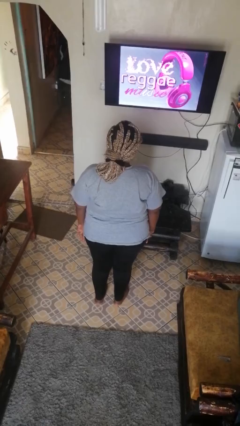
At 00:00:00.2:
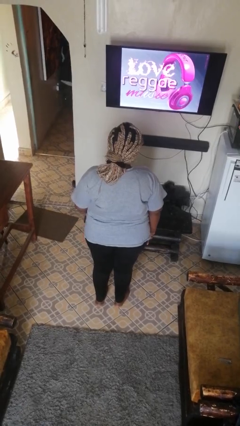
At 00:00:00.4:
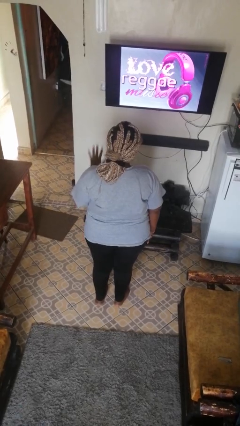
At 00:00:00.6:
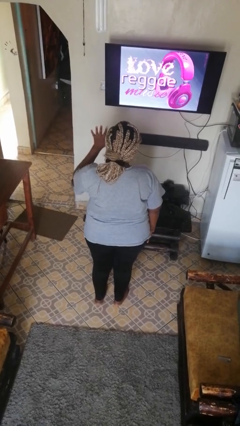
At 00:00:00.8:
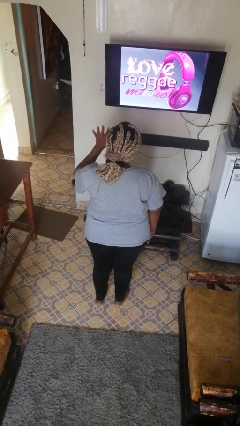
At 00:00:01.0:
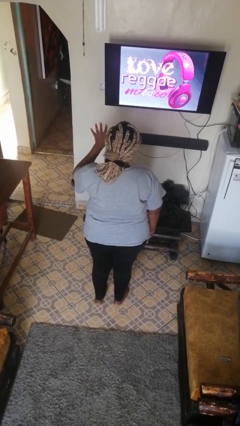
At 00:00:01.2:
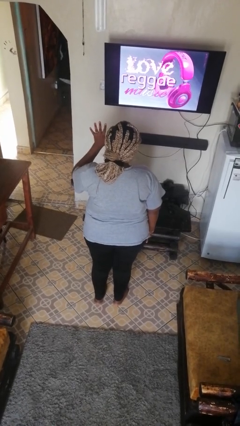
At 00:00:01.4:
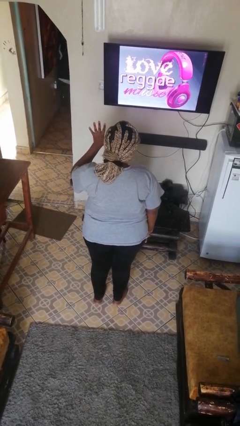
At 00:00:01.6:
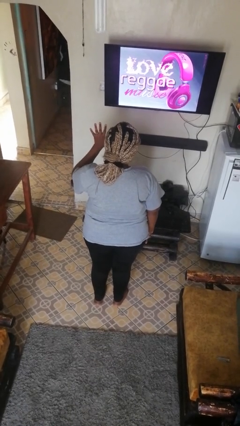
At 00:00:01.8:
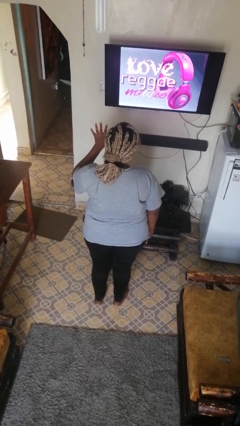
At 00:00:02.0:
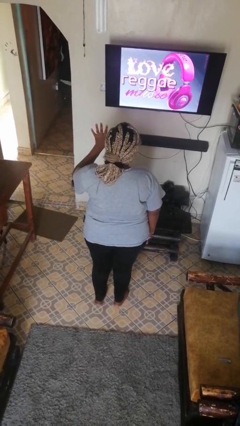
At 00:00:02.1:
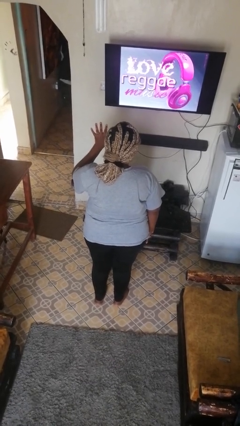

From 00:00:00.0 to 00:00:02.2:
person gestures stop

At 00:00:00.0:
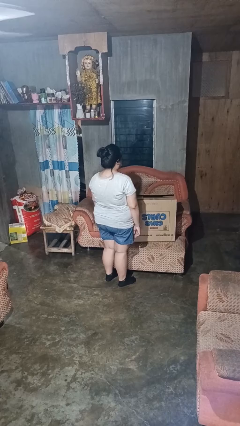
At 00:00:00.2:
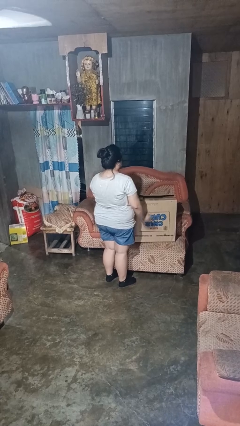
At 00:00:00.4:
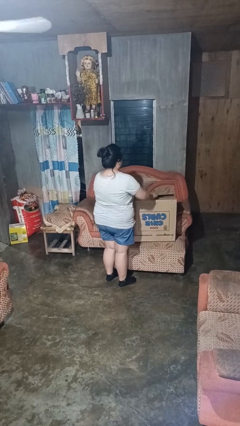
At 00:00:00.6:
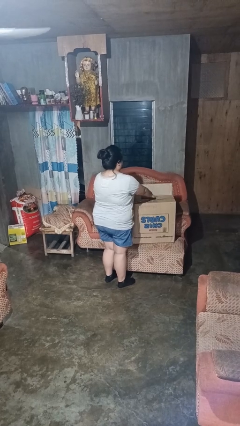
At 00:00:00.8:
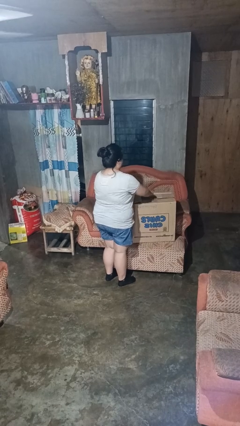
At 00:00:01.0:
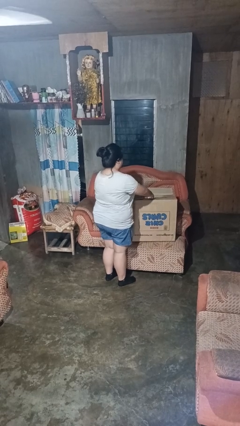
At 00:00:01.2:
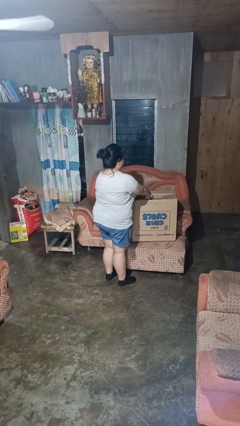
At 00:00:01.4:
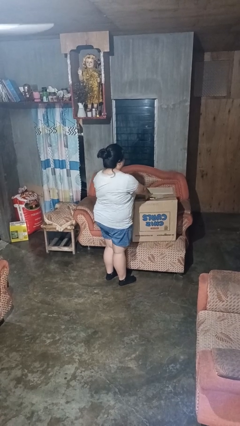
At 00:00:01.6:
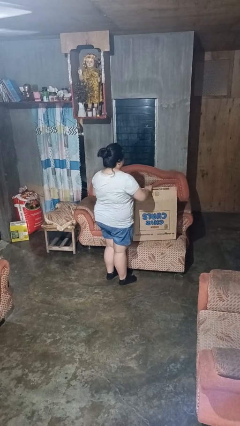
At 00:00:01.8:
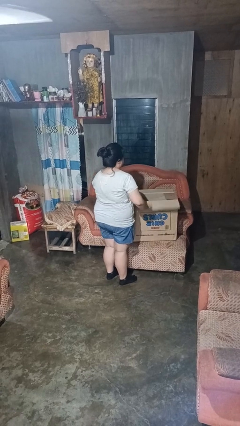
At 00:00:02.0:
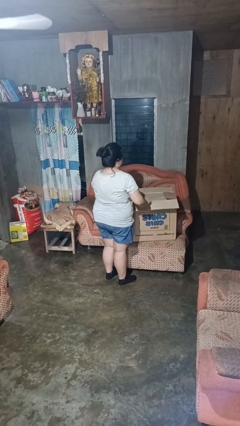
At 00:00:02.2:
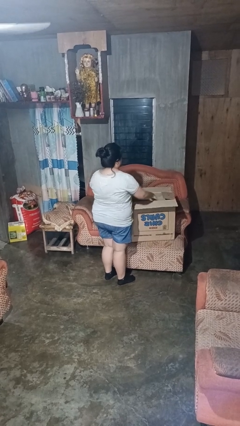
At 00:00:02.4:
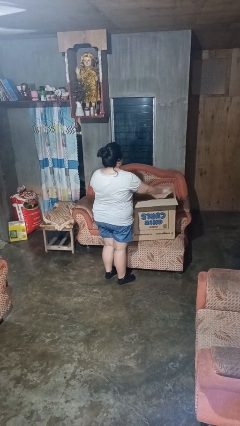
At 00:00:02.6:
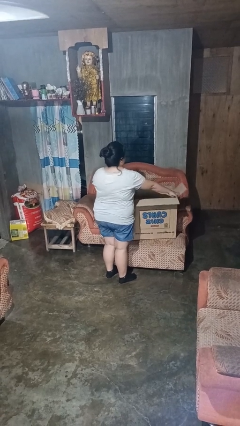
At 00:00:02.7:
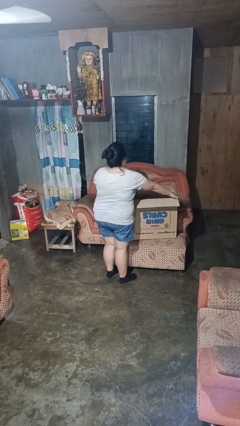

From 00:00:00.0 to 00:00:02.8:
person opens box

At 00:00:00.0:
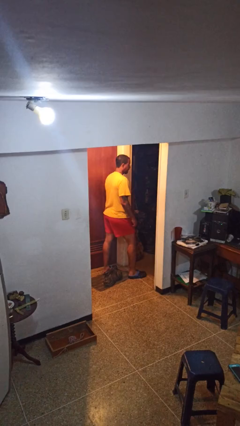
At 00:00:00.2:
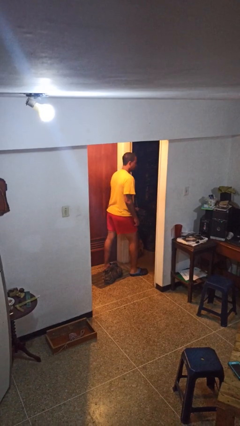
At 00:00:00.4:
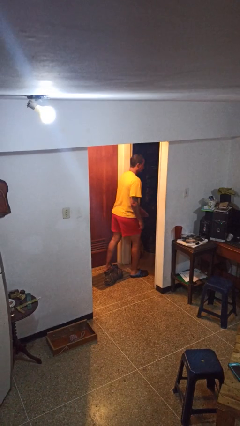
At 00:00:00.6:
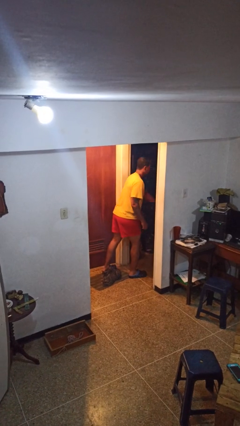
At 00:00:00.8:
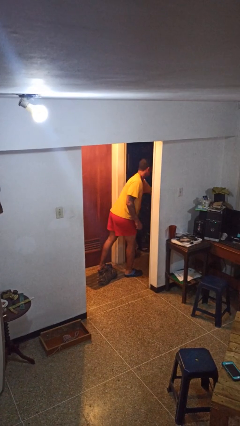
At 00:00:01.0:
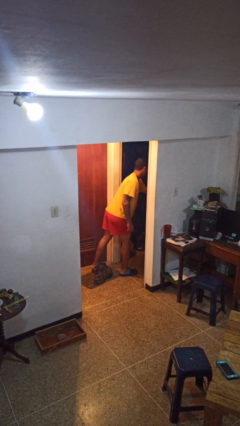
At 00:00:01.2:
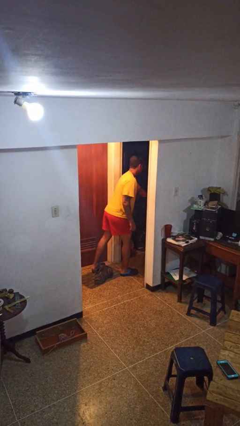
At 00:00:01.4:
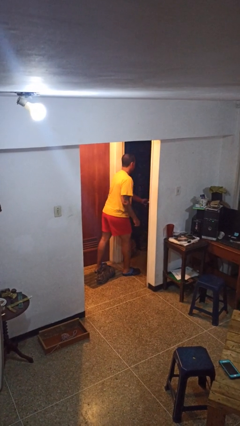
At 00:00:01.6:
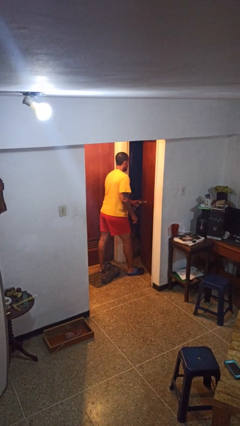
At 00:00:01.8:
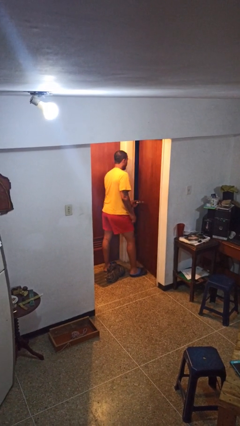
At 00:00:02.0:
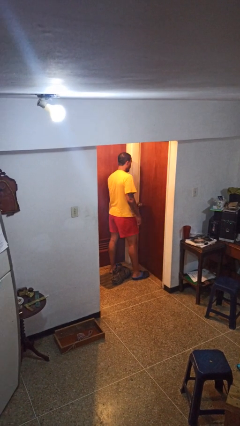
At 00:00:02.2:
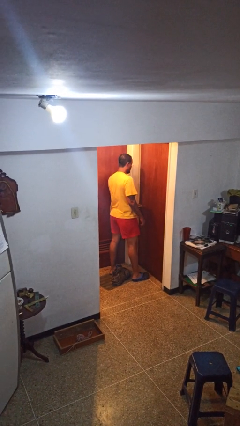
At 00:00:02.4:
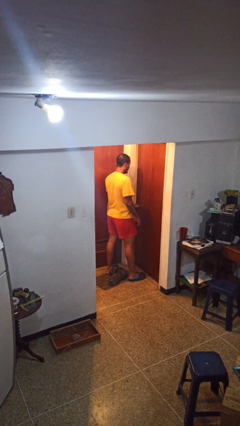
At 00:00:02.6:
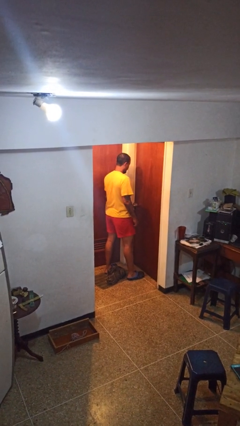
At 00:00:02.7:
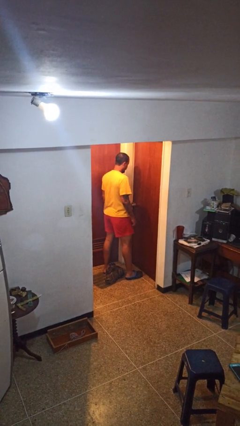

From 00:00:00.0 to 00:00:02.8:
person closes facility door

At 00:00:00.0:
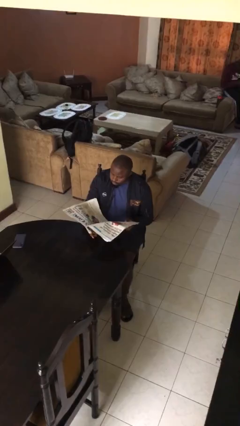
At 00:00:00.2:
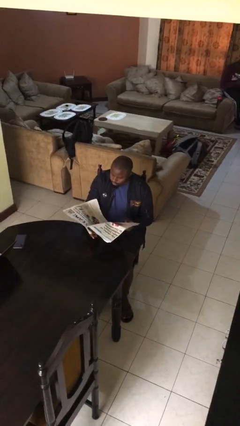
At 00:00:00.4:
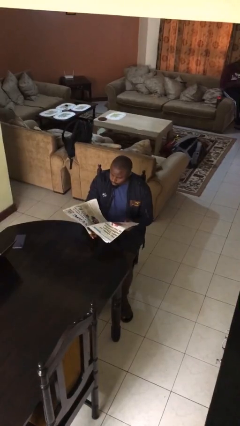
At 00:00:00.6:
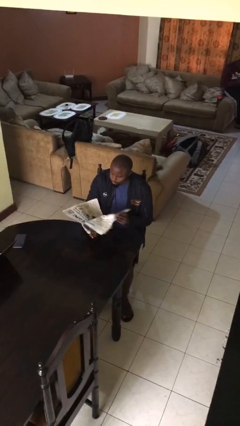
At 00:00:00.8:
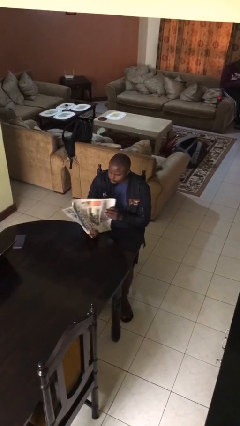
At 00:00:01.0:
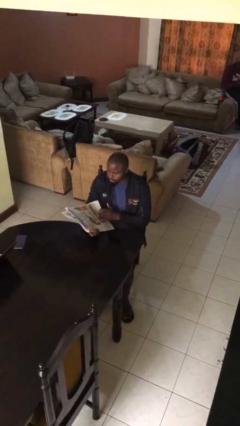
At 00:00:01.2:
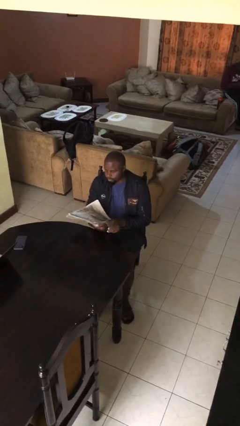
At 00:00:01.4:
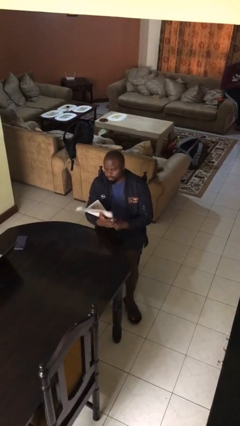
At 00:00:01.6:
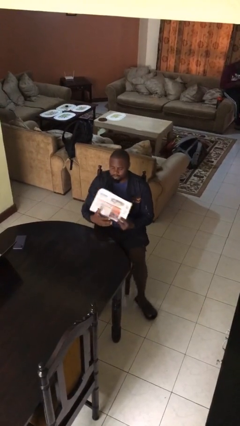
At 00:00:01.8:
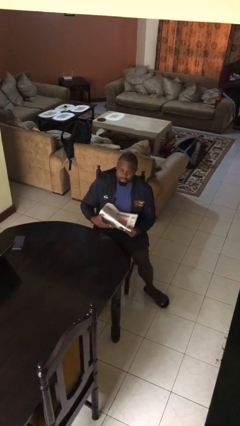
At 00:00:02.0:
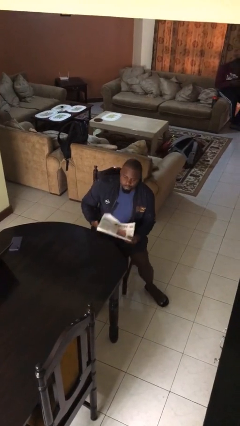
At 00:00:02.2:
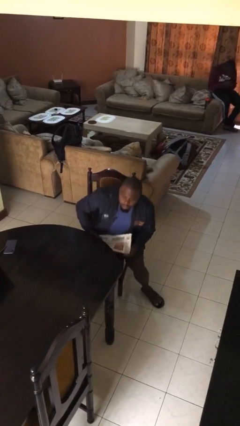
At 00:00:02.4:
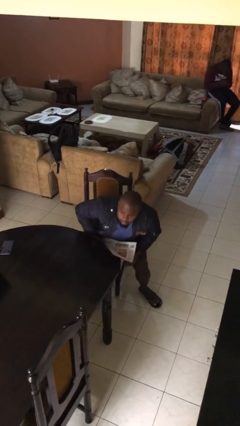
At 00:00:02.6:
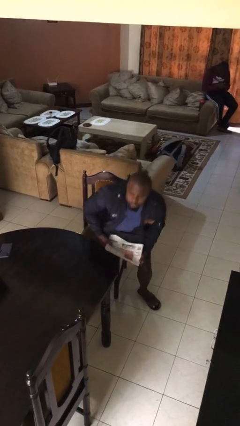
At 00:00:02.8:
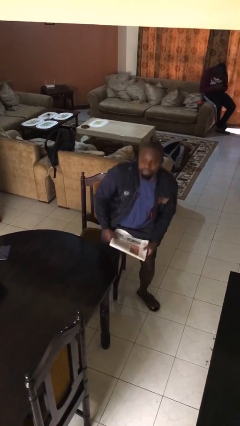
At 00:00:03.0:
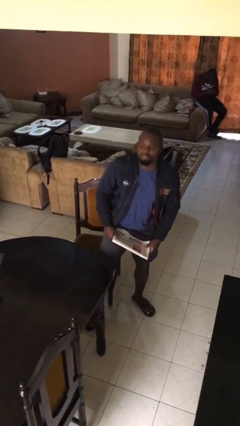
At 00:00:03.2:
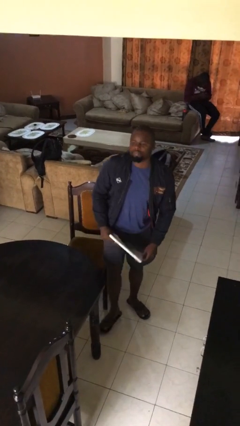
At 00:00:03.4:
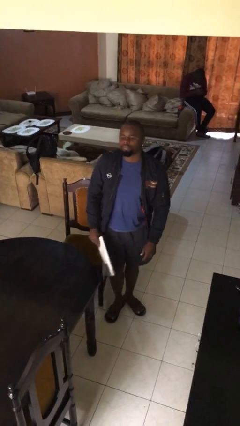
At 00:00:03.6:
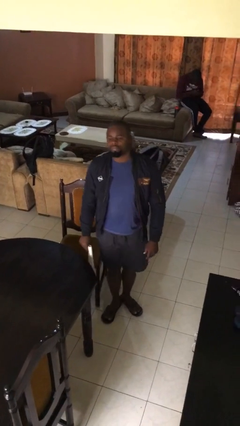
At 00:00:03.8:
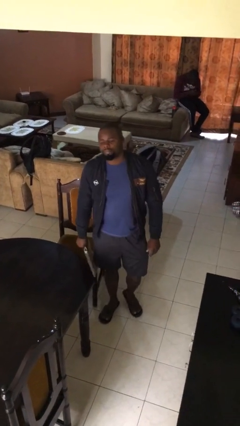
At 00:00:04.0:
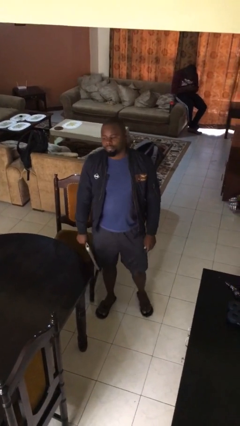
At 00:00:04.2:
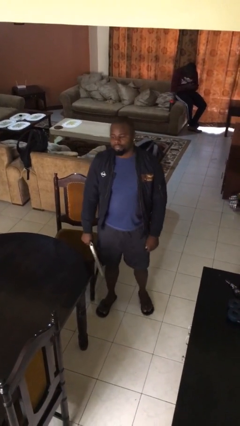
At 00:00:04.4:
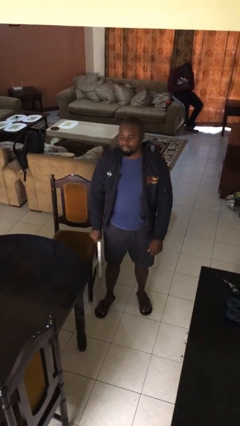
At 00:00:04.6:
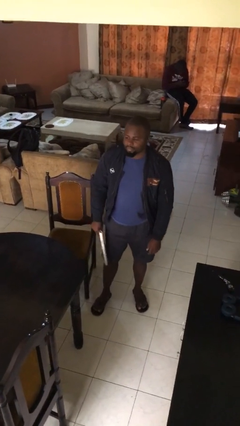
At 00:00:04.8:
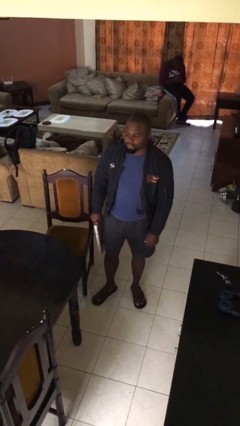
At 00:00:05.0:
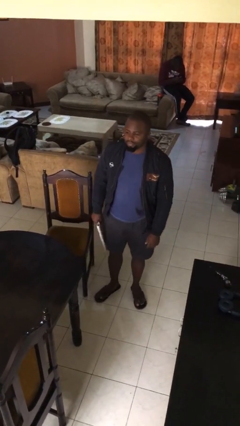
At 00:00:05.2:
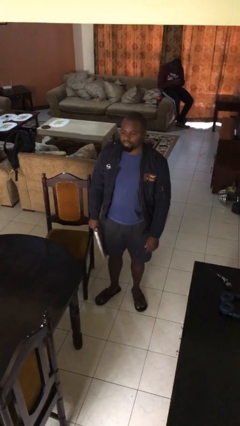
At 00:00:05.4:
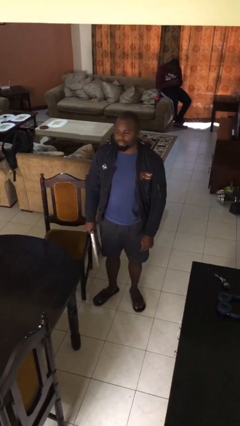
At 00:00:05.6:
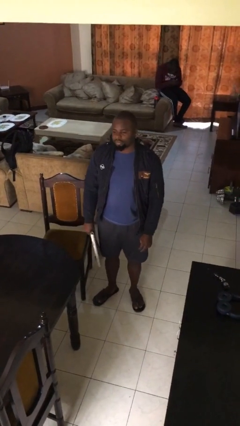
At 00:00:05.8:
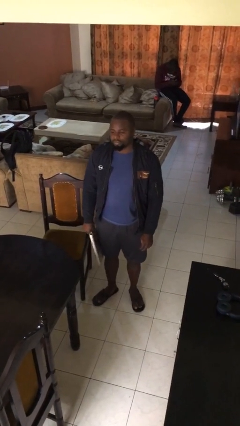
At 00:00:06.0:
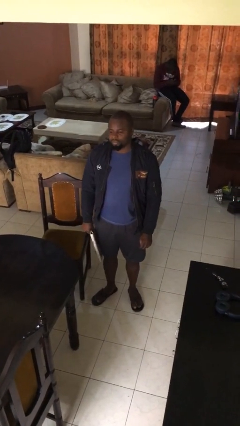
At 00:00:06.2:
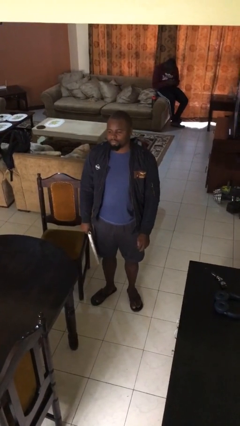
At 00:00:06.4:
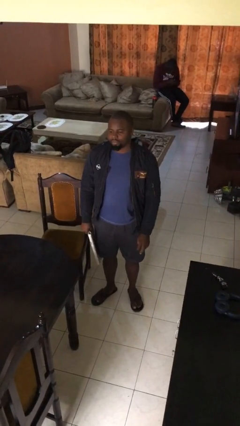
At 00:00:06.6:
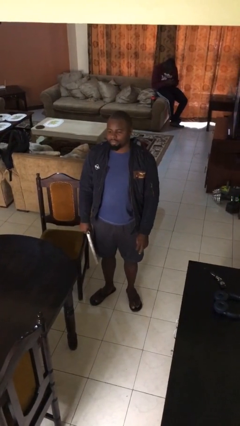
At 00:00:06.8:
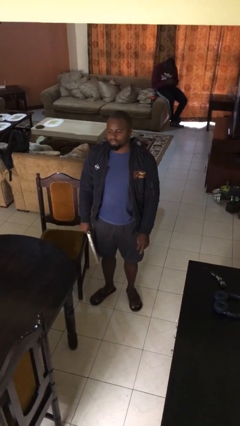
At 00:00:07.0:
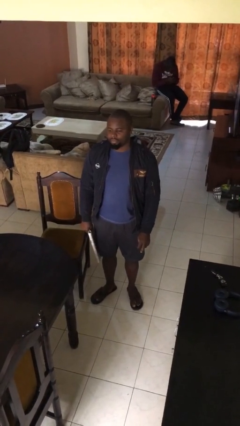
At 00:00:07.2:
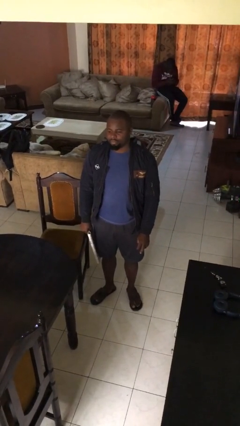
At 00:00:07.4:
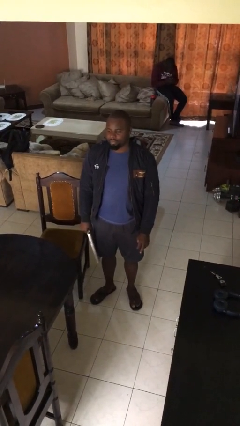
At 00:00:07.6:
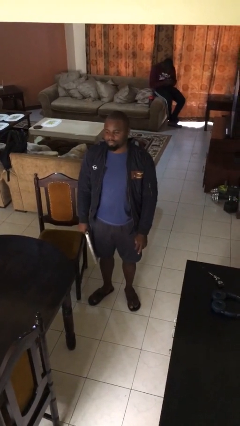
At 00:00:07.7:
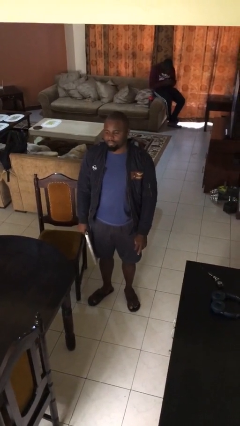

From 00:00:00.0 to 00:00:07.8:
person stands up

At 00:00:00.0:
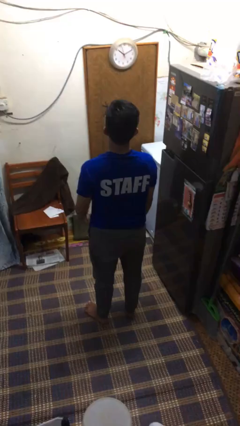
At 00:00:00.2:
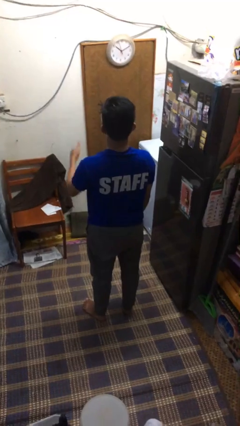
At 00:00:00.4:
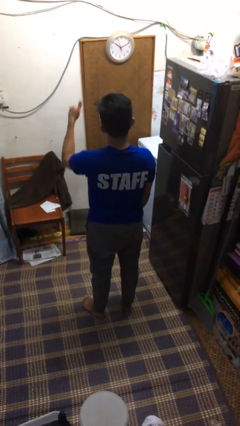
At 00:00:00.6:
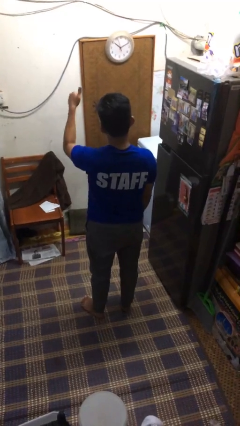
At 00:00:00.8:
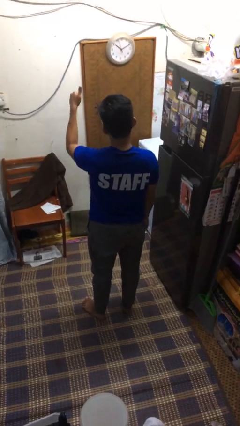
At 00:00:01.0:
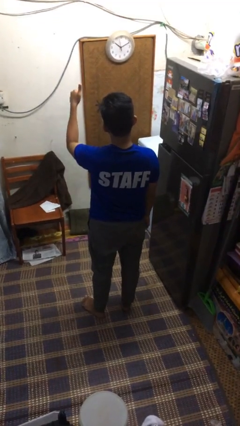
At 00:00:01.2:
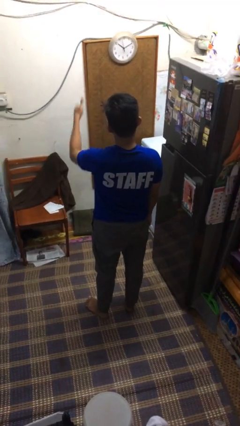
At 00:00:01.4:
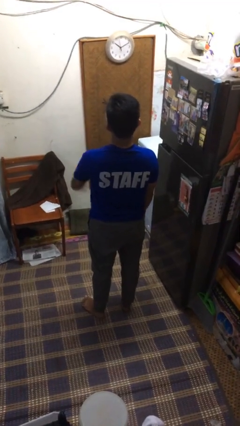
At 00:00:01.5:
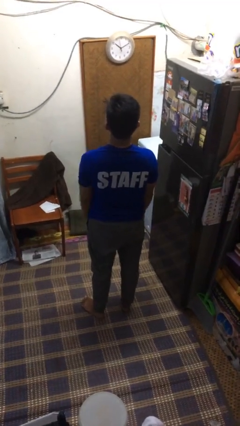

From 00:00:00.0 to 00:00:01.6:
person gestures thumbs up

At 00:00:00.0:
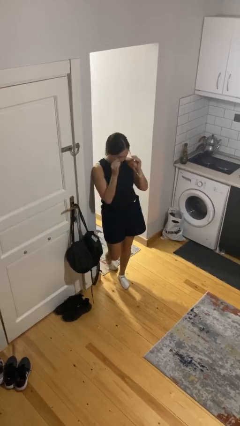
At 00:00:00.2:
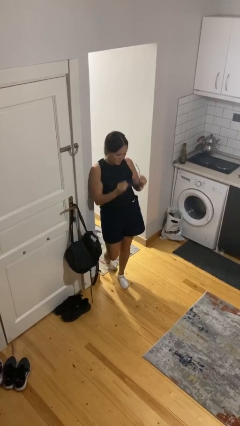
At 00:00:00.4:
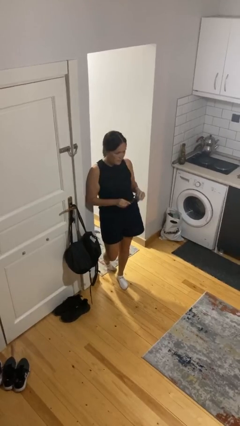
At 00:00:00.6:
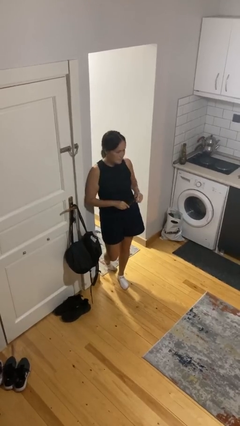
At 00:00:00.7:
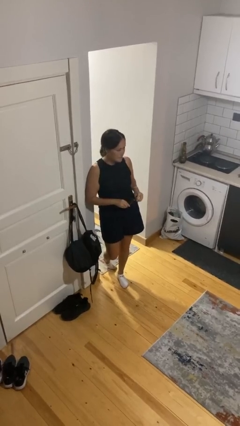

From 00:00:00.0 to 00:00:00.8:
person takes off sunglasses
